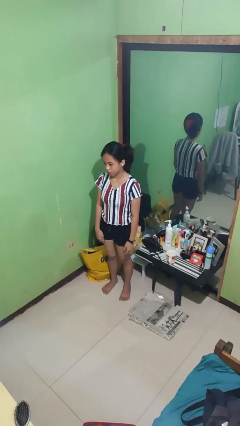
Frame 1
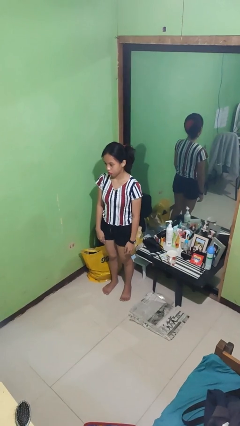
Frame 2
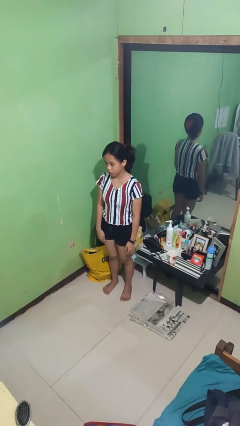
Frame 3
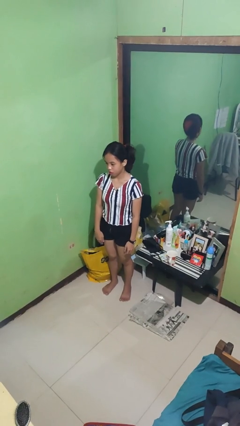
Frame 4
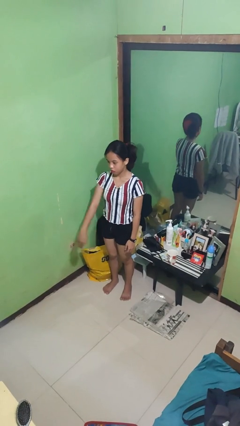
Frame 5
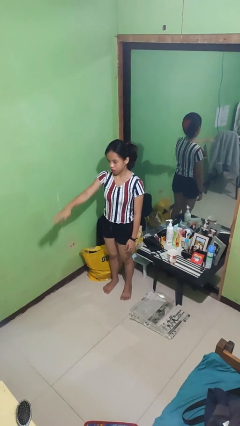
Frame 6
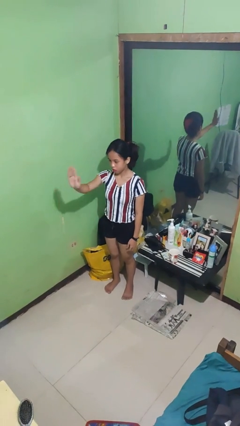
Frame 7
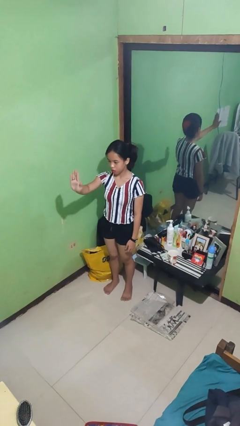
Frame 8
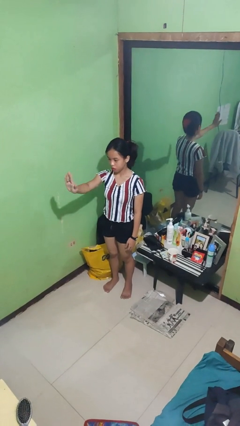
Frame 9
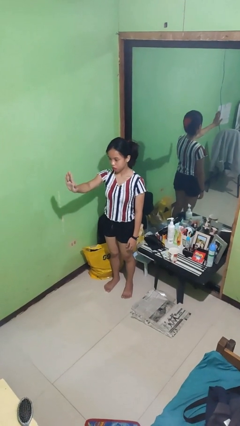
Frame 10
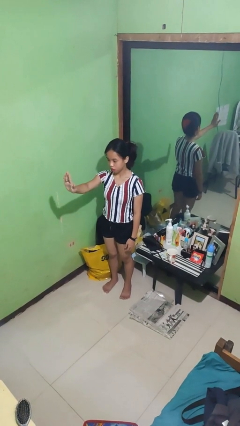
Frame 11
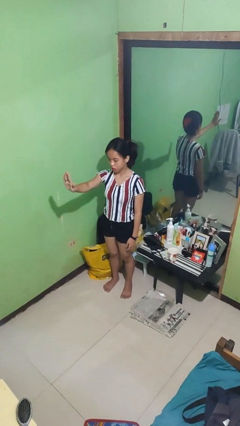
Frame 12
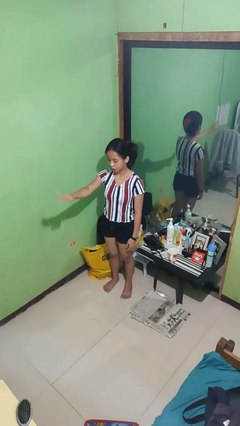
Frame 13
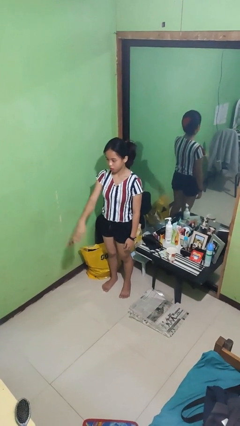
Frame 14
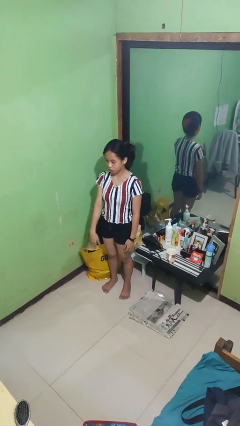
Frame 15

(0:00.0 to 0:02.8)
person gestures stop

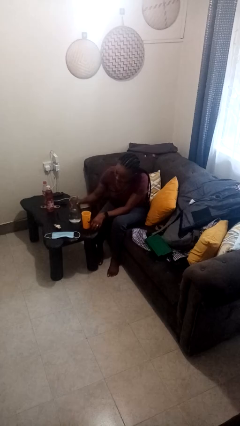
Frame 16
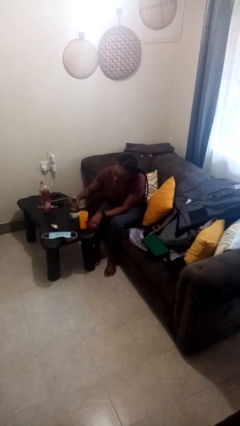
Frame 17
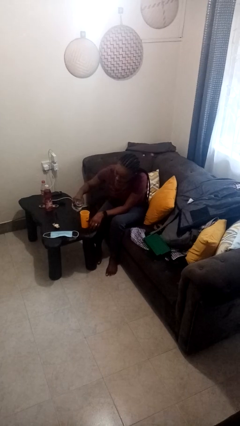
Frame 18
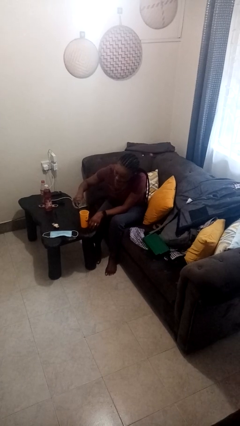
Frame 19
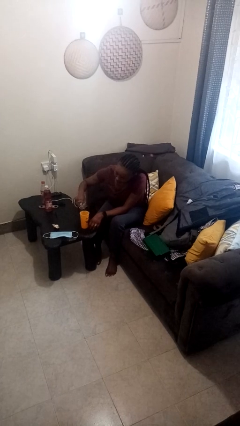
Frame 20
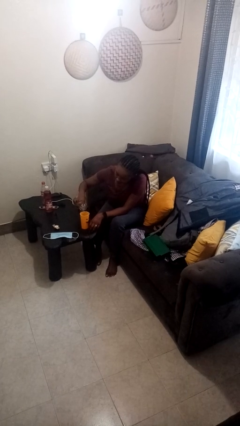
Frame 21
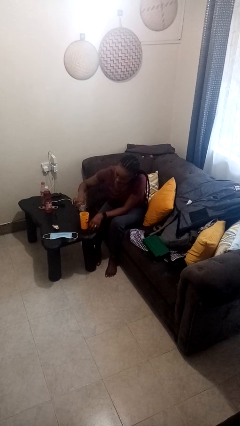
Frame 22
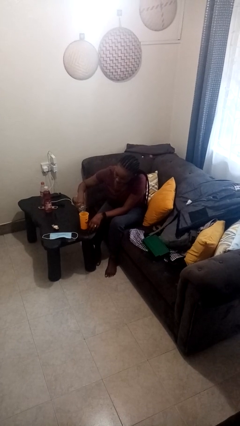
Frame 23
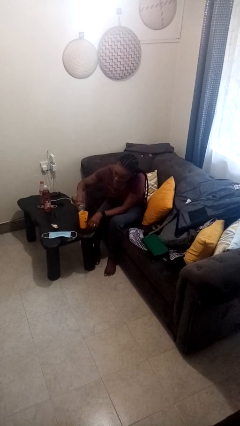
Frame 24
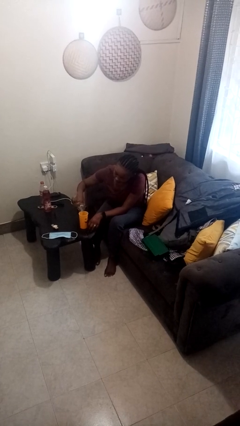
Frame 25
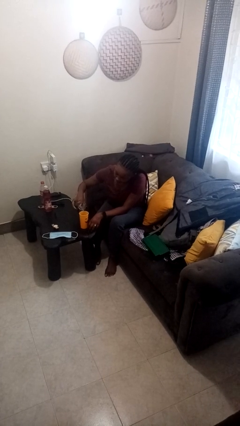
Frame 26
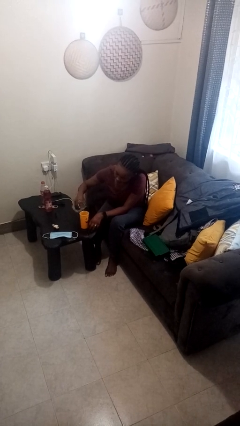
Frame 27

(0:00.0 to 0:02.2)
person pours liquid into cup

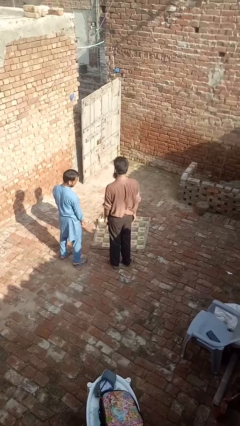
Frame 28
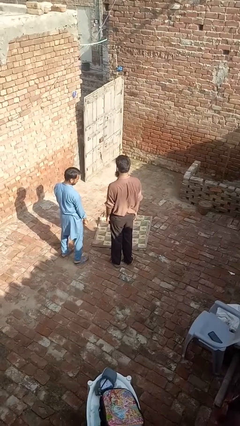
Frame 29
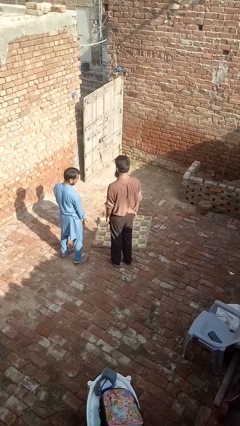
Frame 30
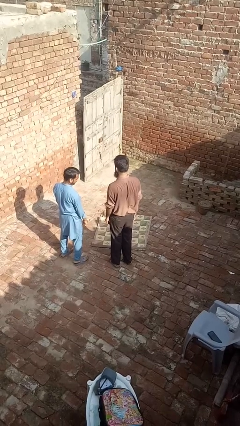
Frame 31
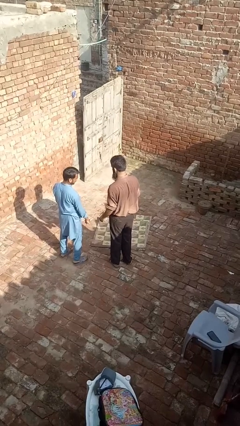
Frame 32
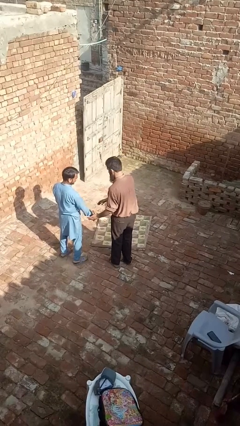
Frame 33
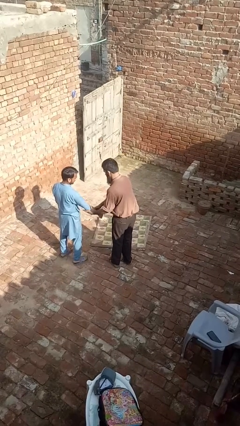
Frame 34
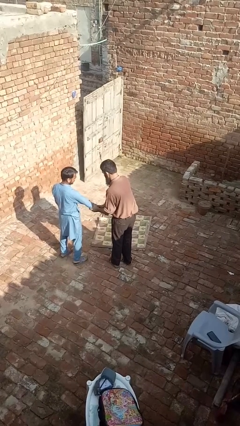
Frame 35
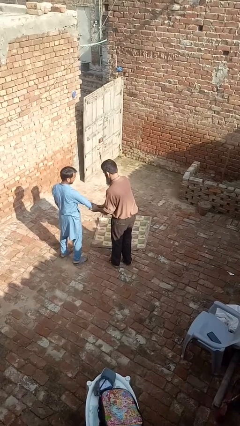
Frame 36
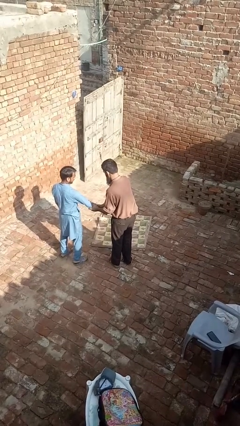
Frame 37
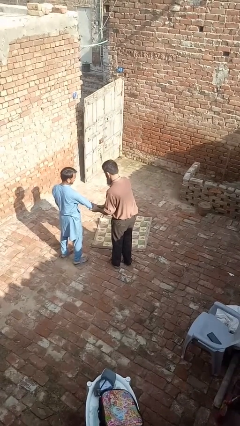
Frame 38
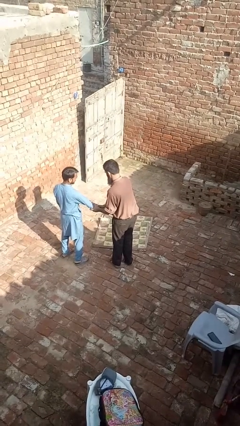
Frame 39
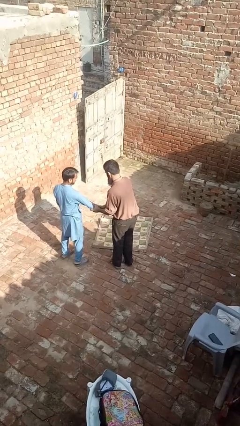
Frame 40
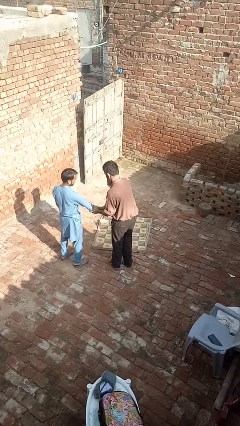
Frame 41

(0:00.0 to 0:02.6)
person grabs person by forearm

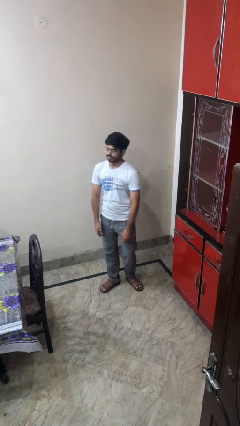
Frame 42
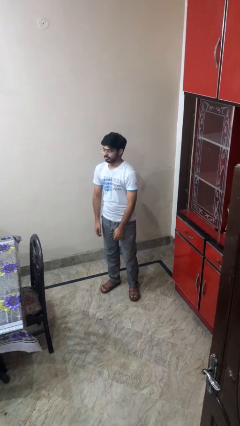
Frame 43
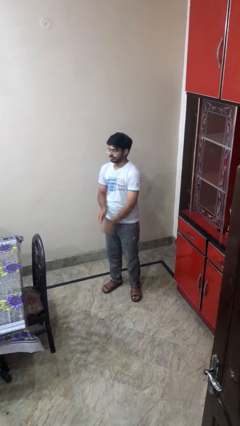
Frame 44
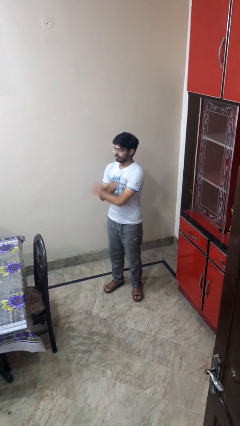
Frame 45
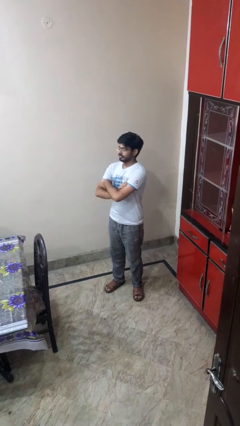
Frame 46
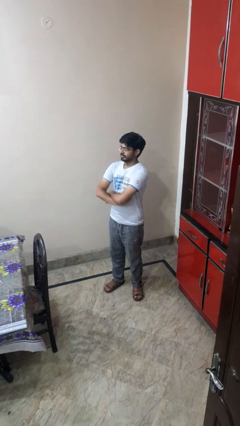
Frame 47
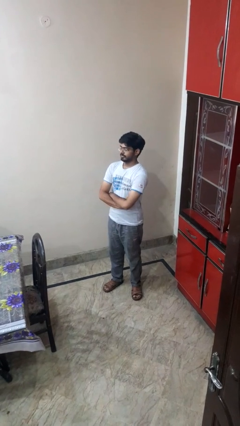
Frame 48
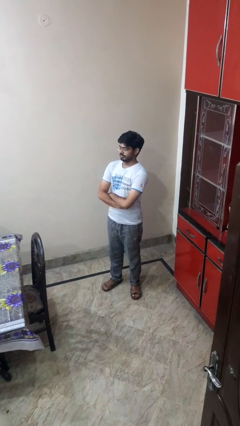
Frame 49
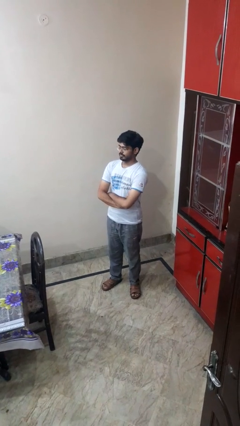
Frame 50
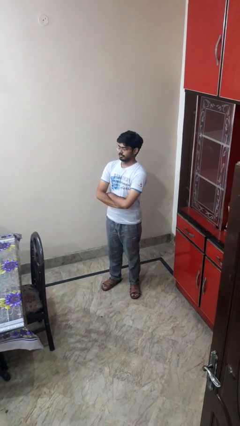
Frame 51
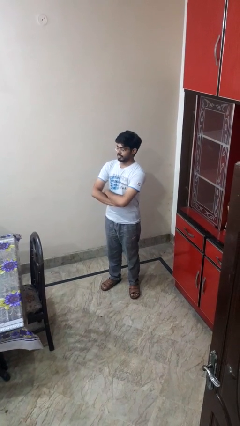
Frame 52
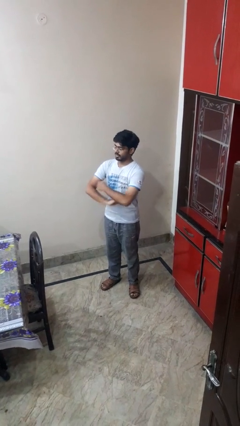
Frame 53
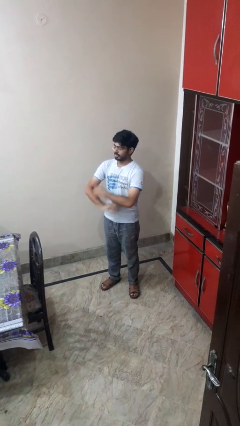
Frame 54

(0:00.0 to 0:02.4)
person crosses arms

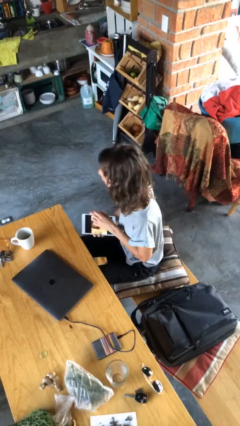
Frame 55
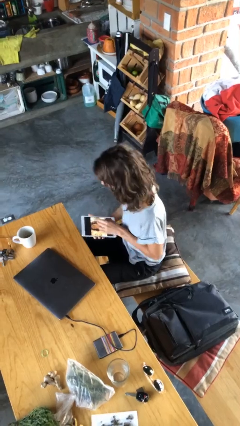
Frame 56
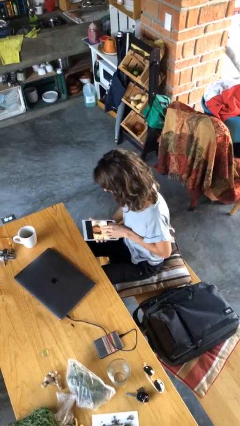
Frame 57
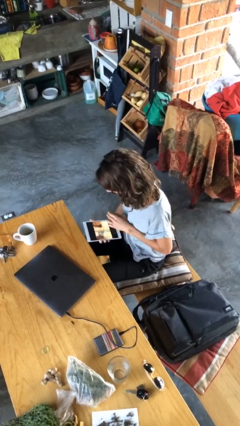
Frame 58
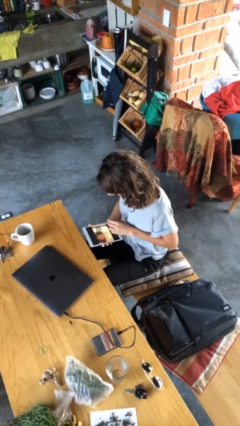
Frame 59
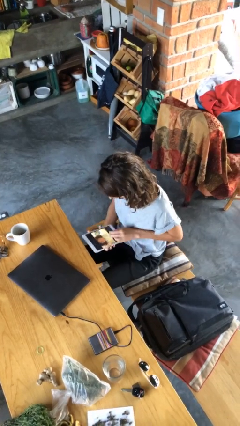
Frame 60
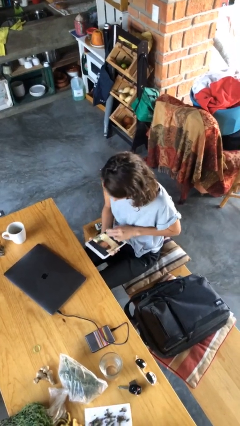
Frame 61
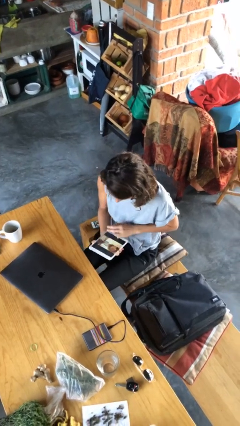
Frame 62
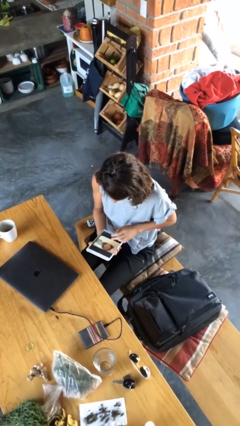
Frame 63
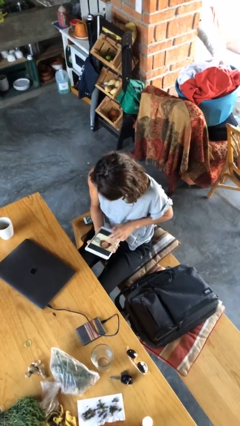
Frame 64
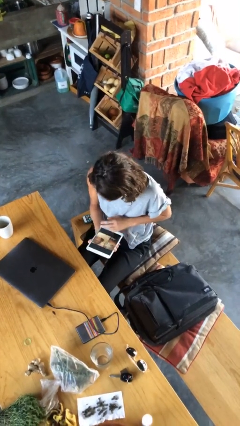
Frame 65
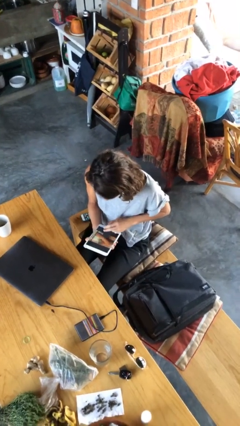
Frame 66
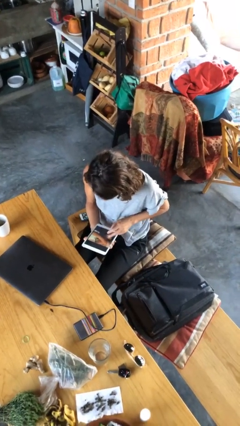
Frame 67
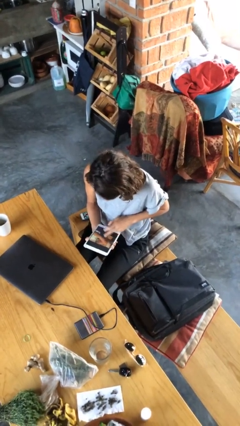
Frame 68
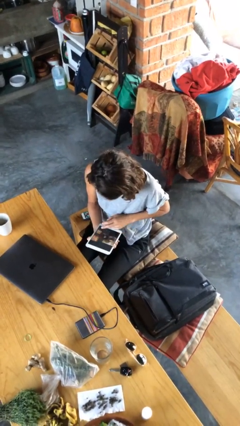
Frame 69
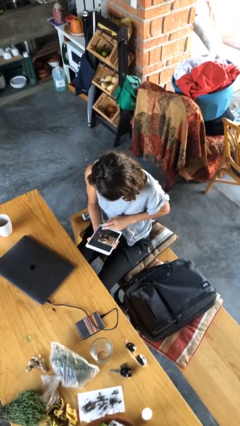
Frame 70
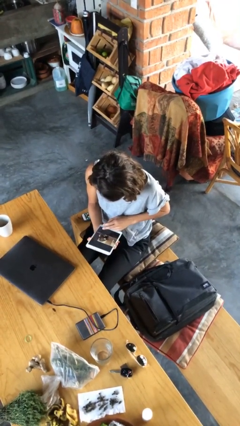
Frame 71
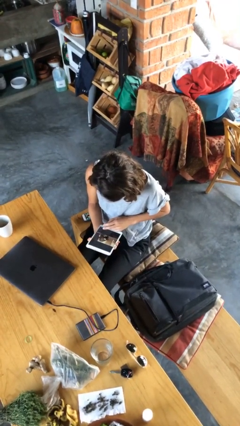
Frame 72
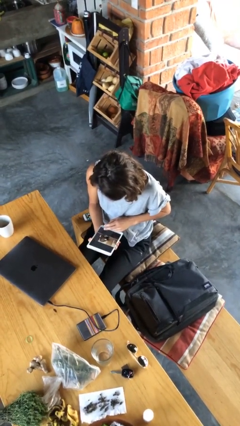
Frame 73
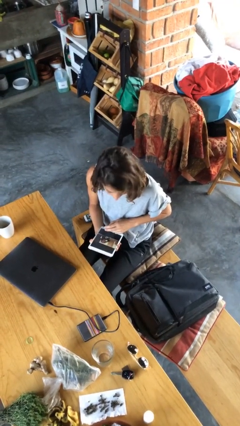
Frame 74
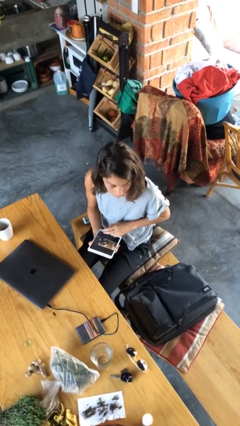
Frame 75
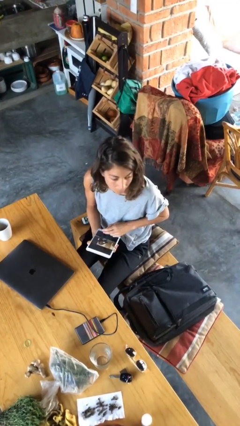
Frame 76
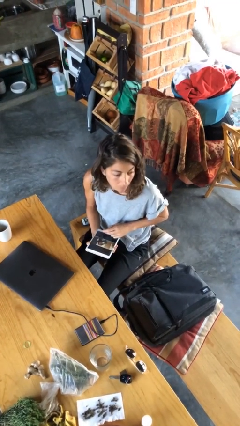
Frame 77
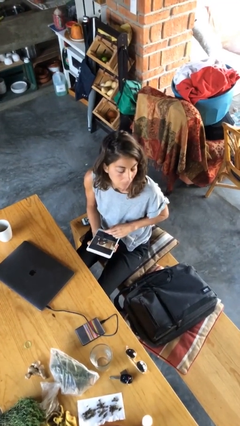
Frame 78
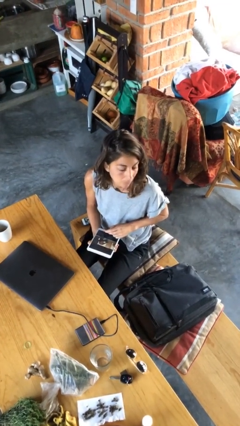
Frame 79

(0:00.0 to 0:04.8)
person interacts with tablet

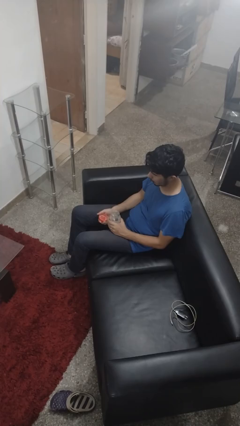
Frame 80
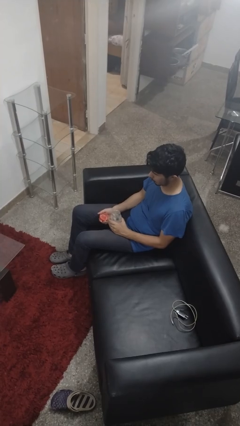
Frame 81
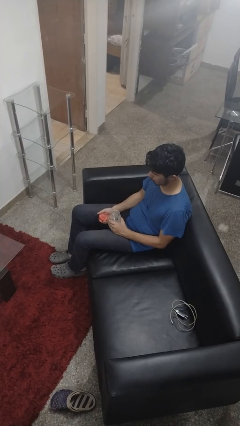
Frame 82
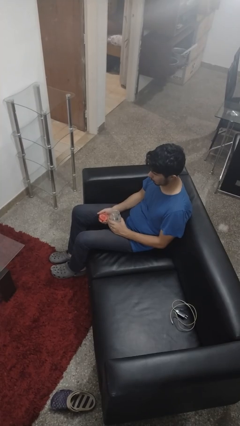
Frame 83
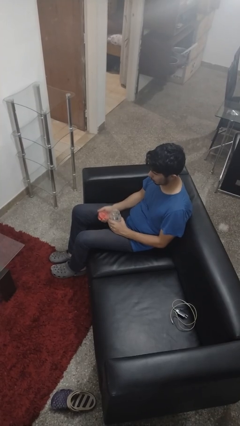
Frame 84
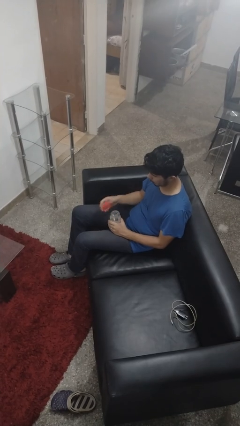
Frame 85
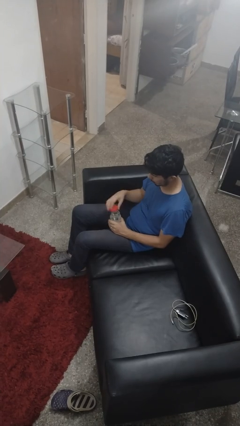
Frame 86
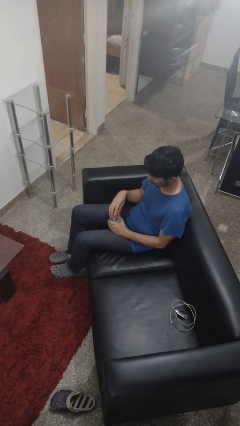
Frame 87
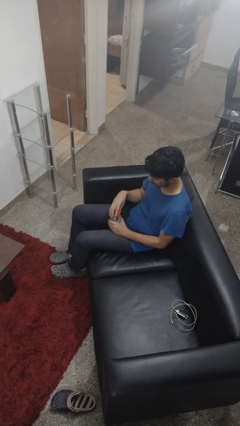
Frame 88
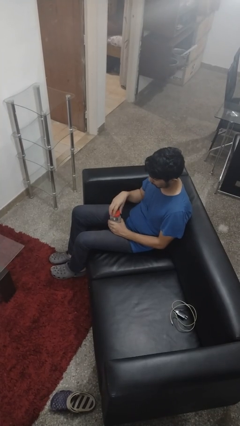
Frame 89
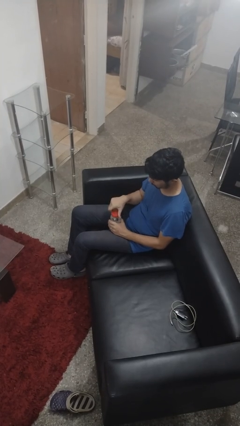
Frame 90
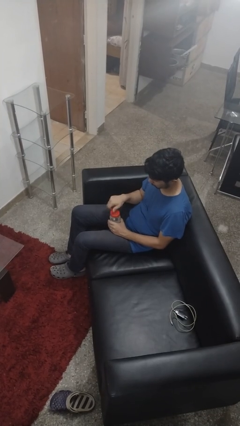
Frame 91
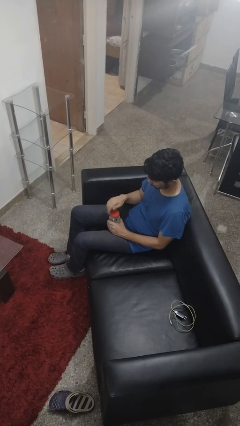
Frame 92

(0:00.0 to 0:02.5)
person closes jar

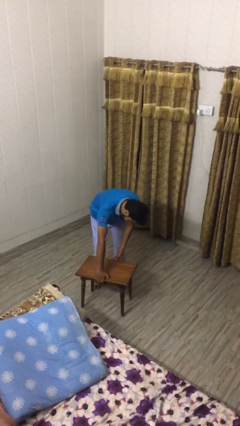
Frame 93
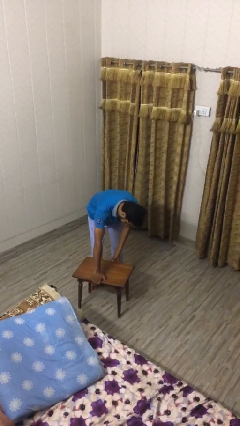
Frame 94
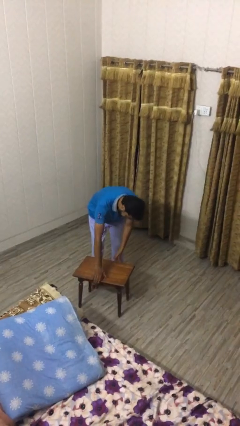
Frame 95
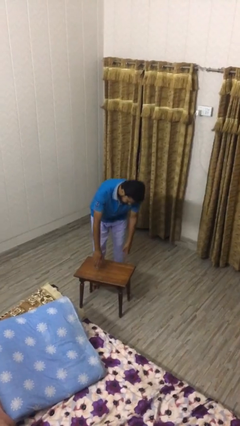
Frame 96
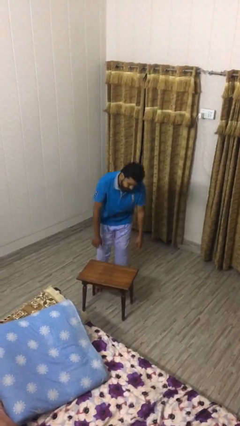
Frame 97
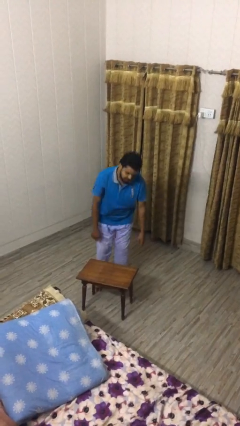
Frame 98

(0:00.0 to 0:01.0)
person puts down object on floor
